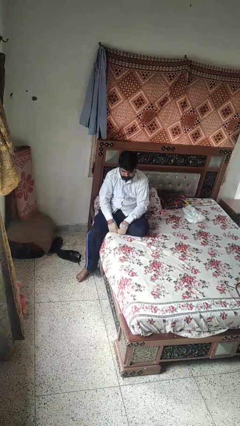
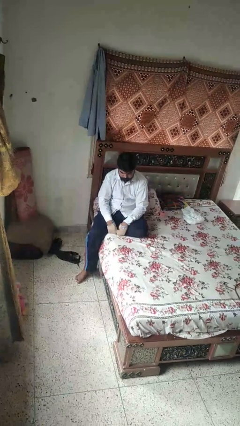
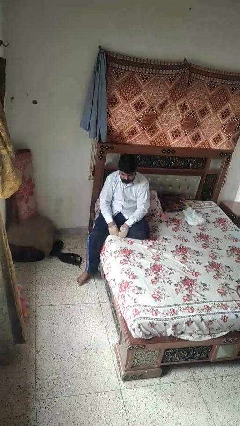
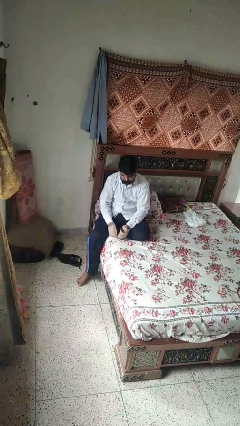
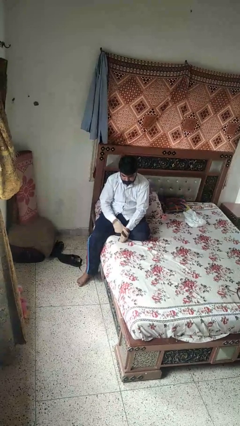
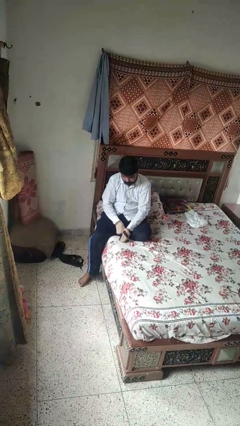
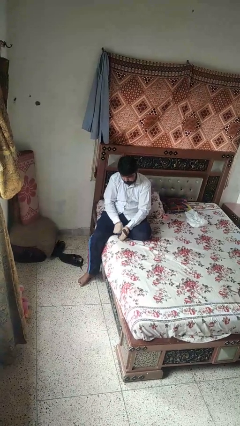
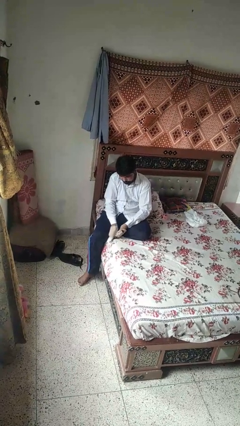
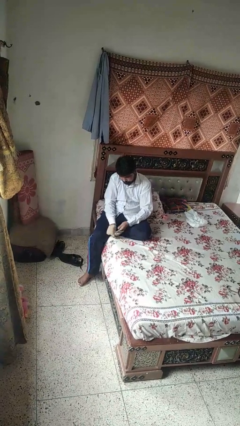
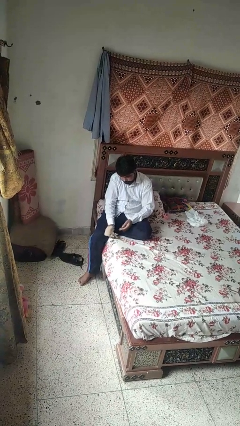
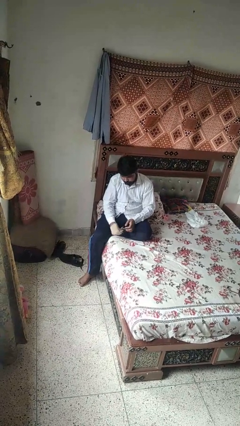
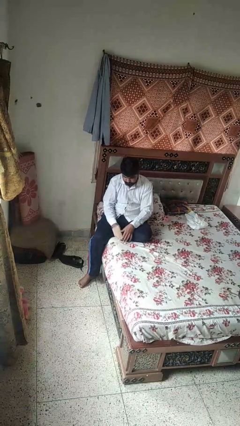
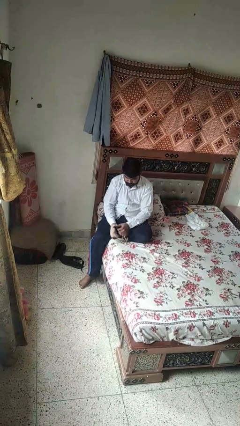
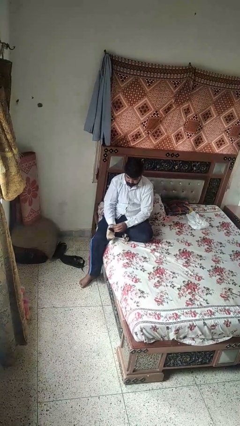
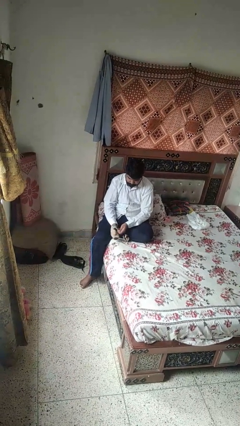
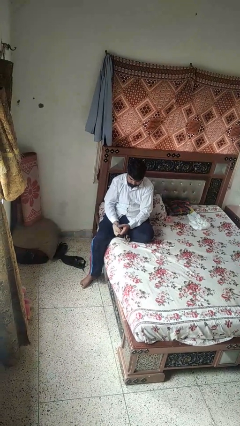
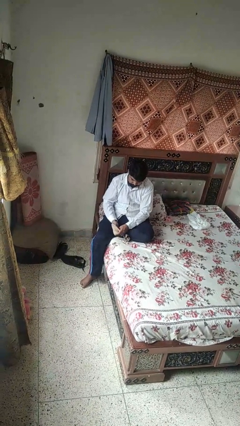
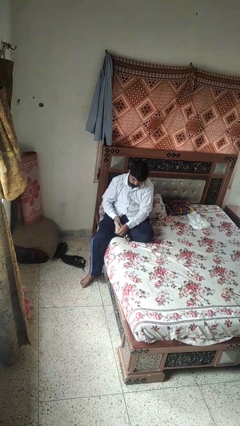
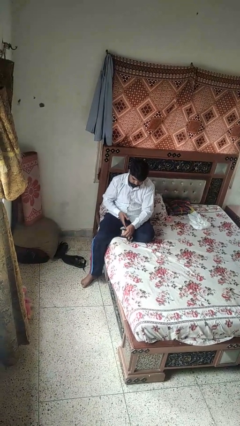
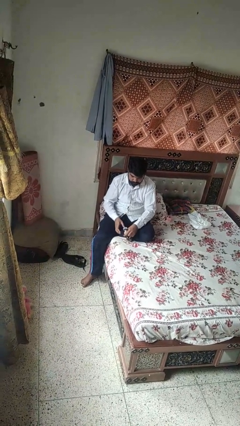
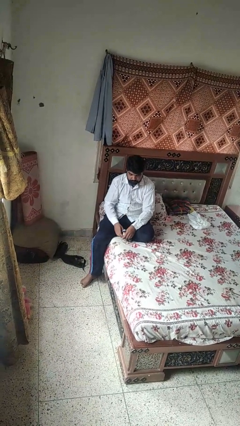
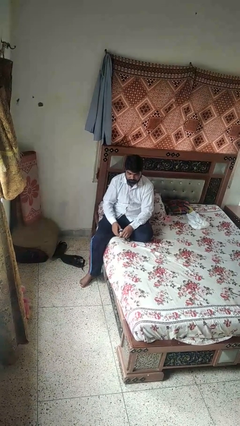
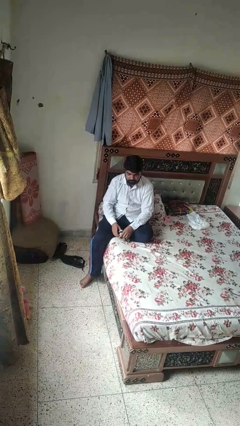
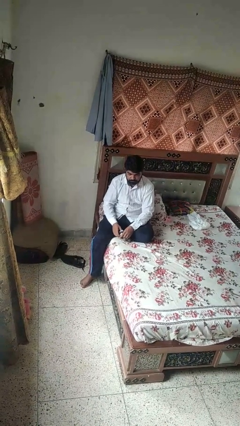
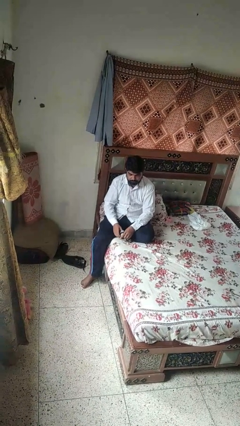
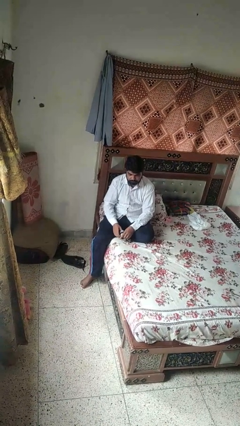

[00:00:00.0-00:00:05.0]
person takes off gloves

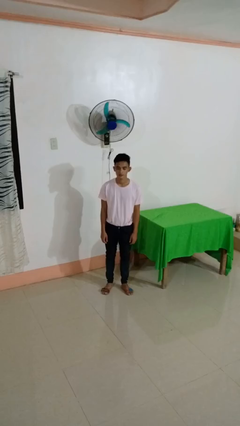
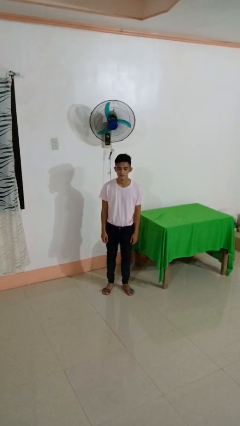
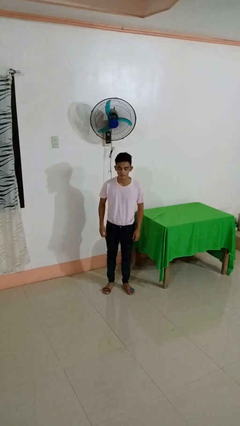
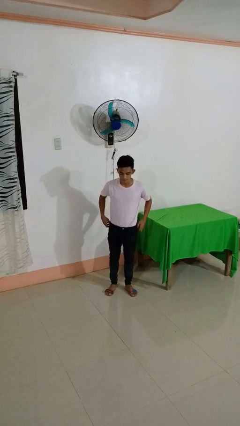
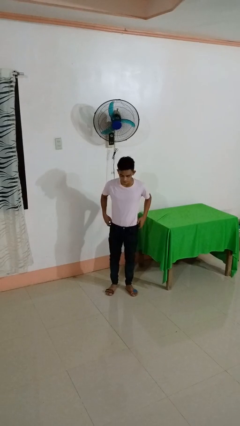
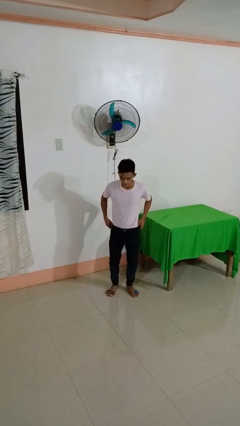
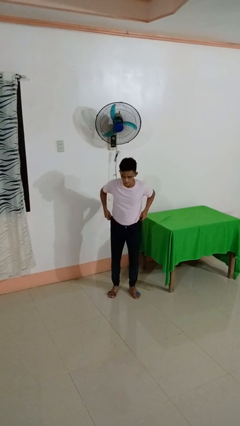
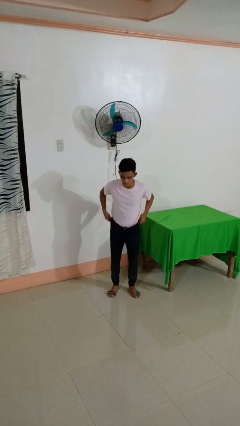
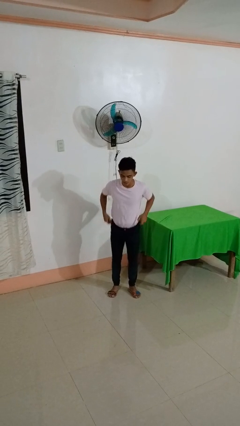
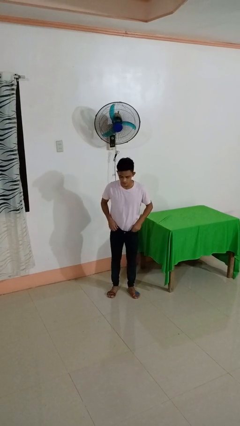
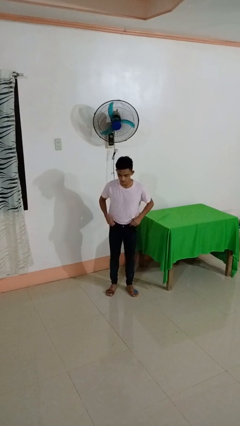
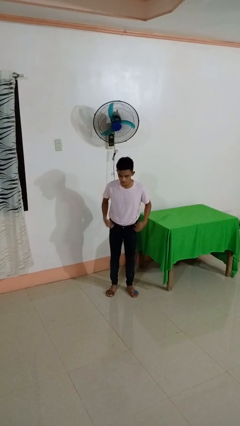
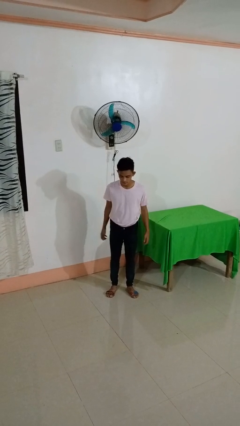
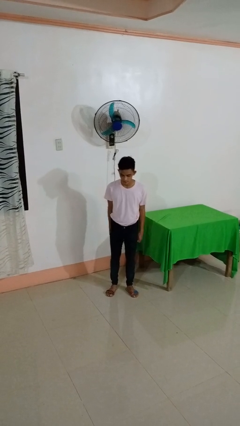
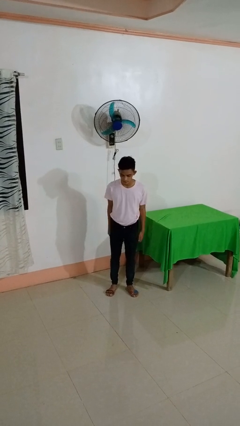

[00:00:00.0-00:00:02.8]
person hikes up pants

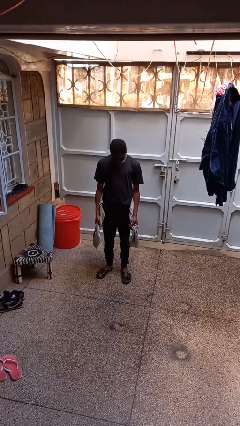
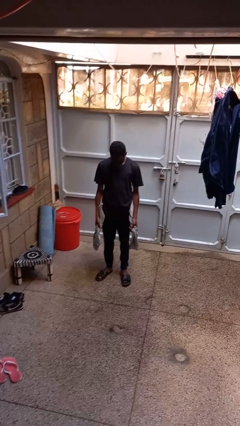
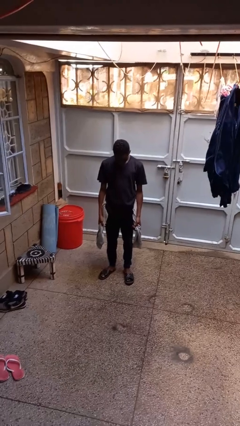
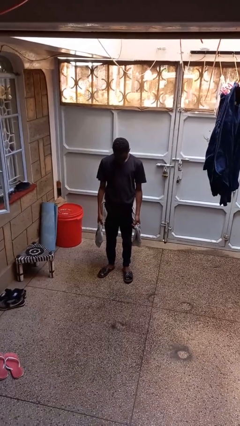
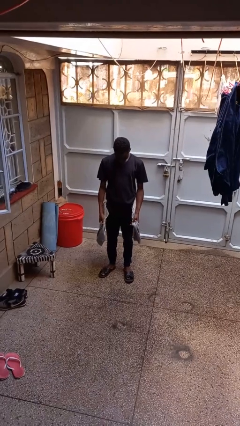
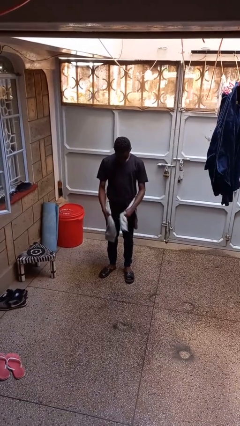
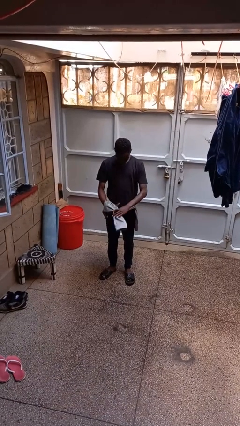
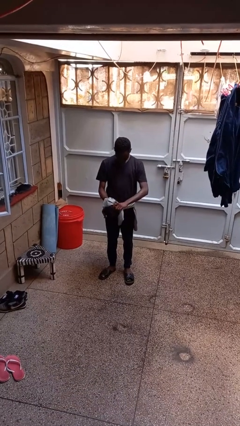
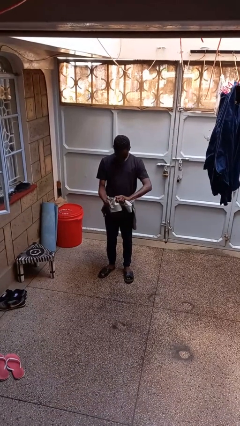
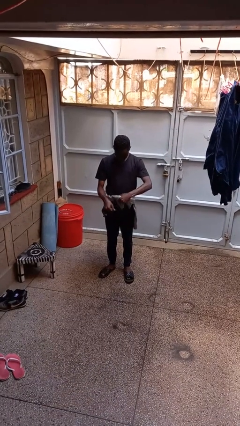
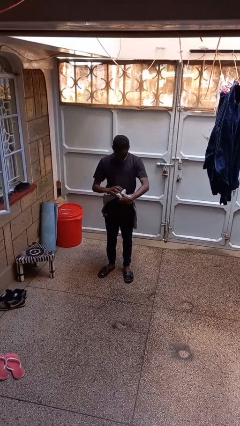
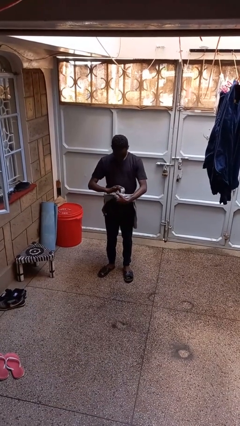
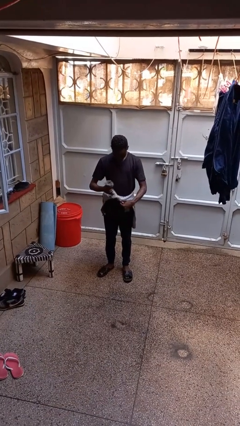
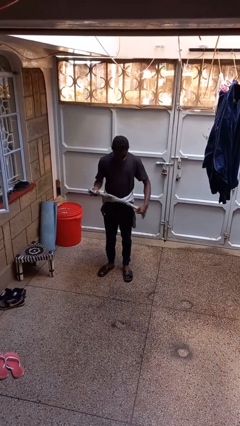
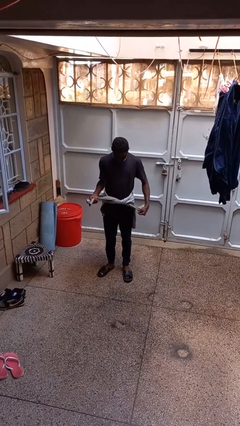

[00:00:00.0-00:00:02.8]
person ties jacket around waist

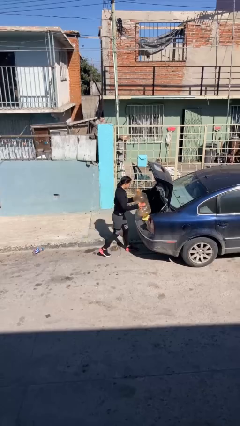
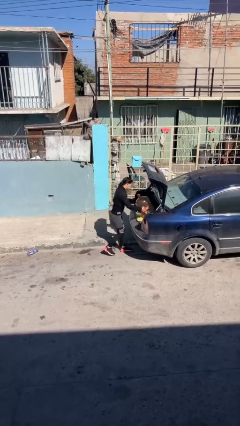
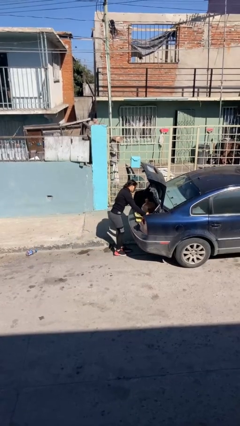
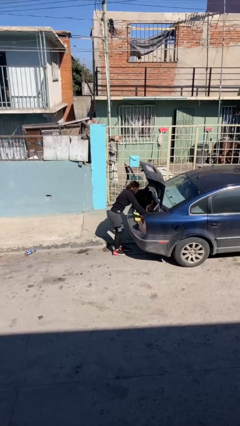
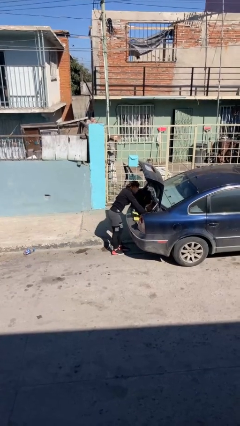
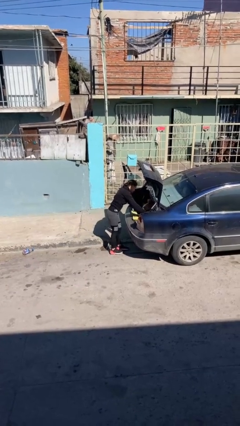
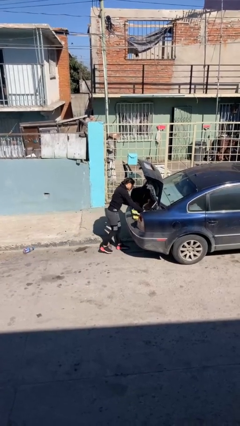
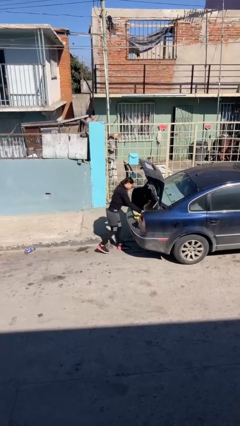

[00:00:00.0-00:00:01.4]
person loads car

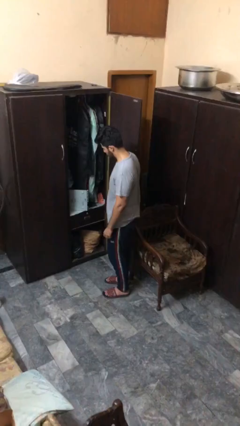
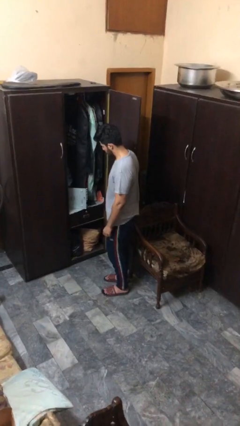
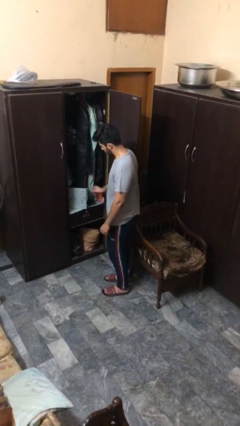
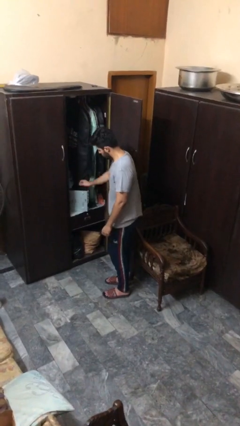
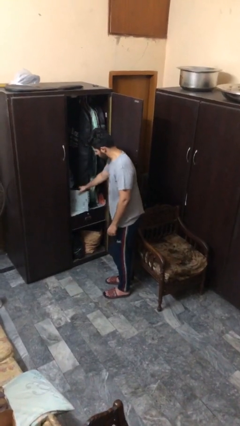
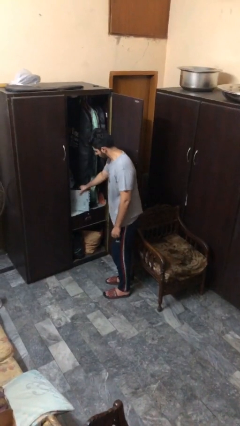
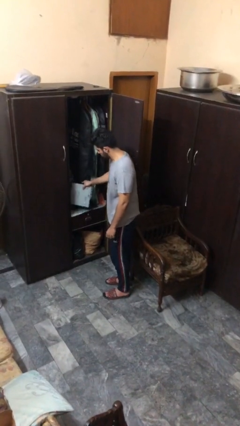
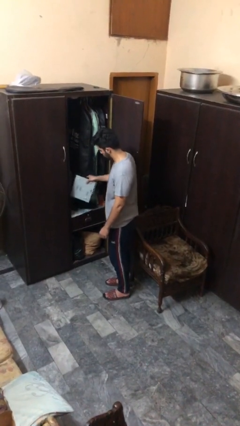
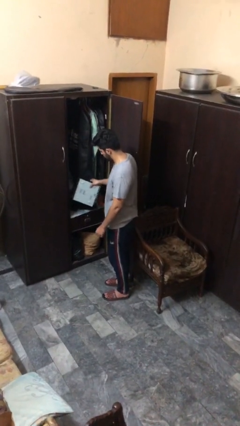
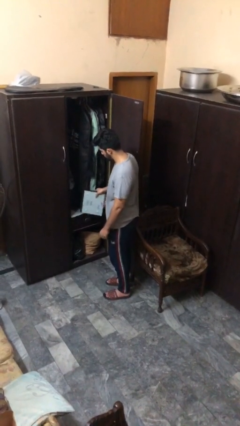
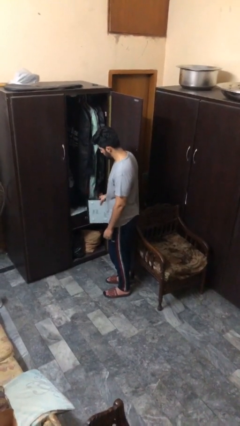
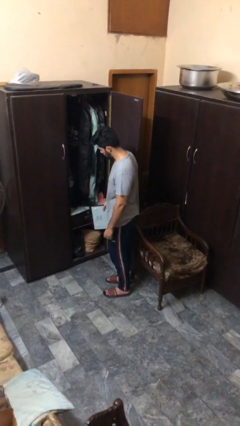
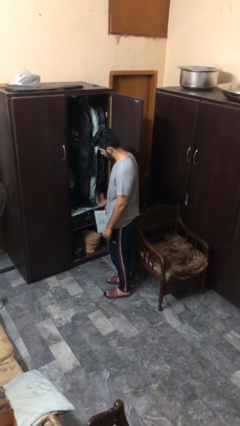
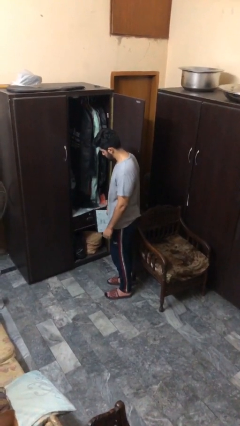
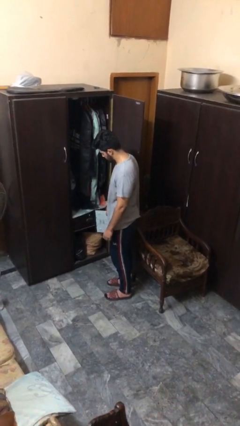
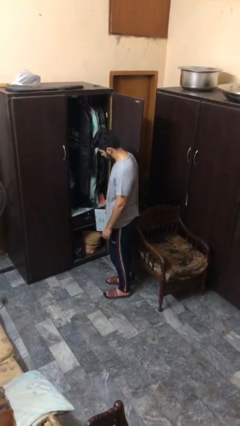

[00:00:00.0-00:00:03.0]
person picks up object from countertop

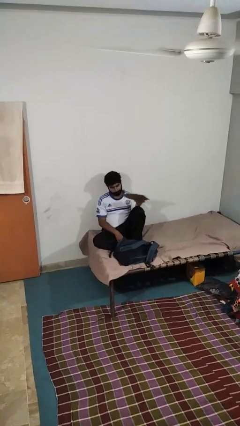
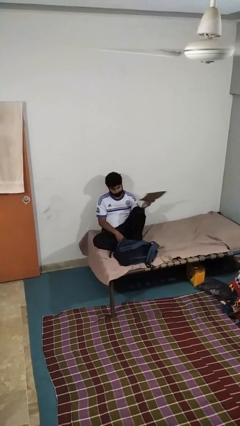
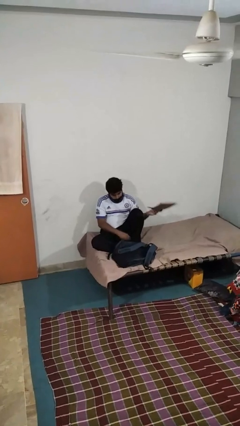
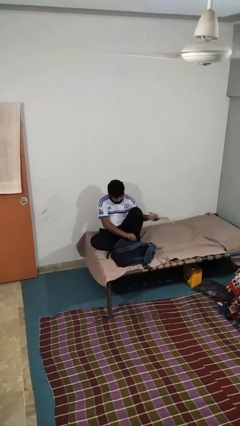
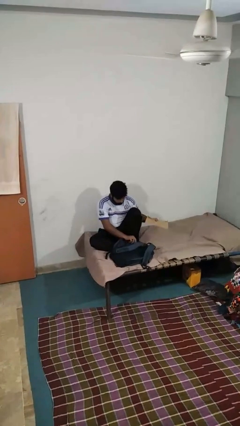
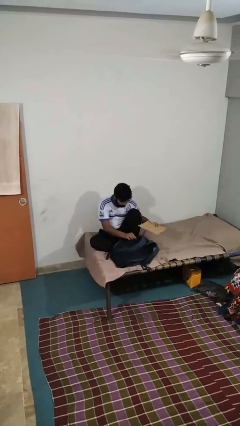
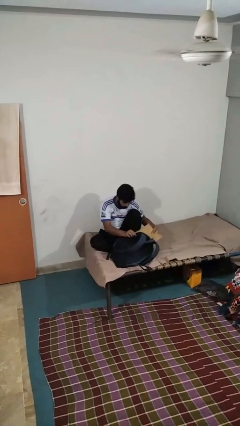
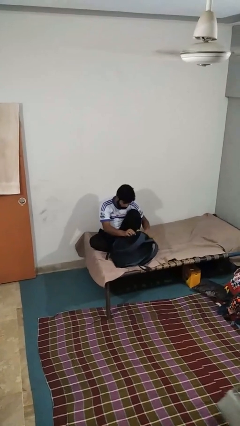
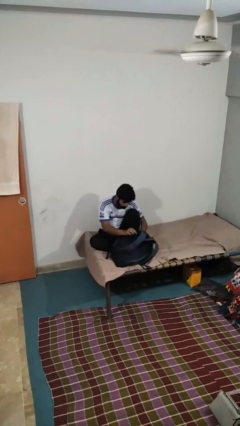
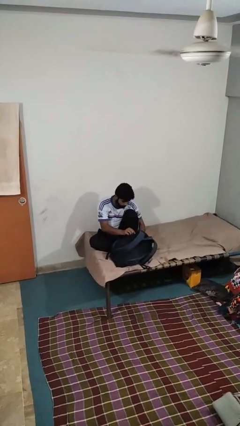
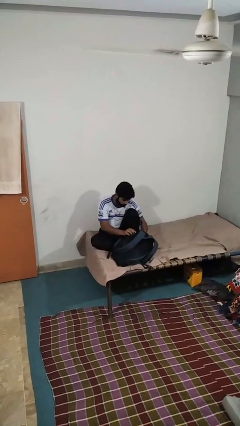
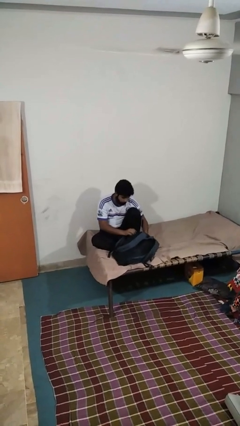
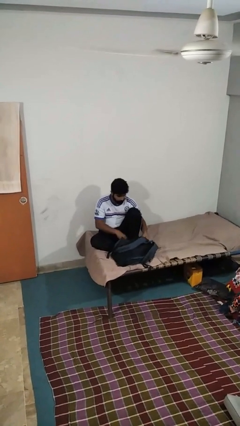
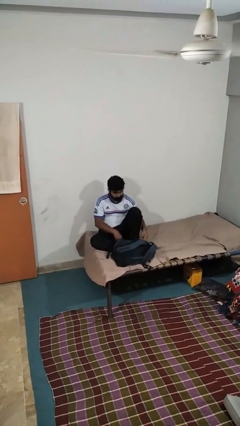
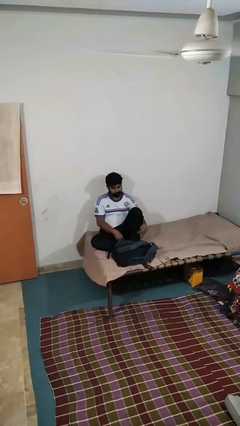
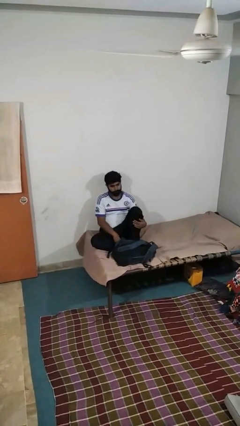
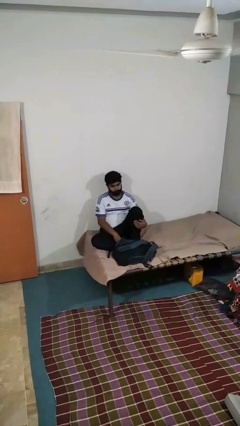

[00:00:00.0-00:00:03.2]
person puts object into backpack
